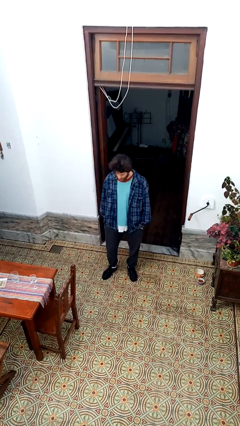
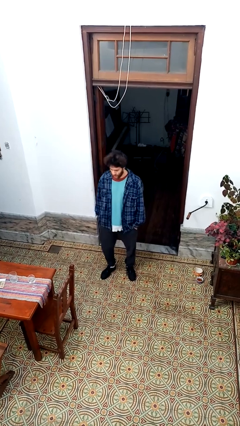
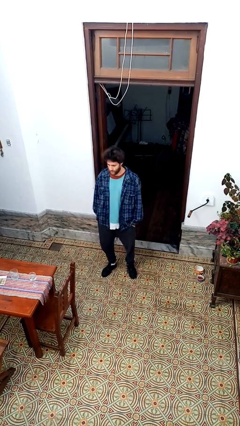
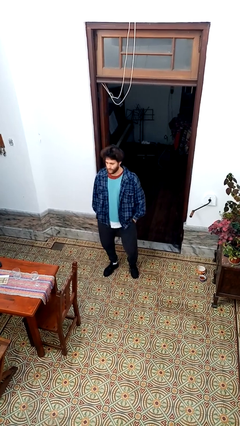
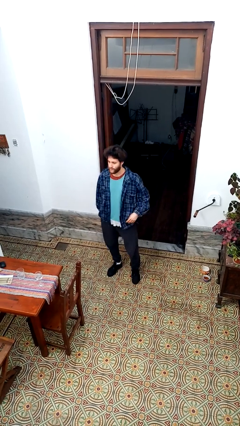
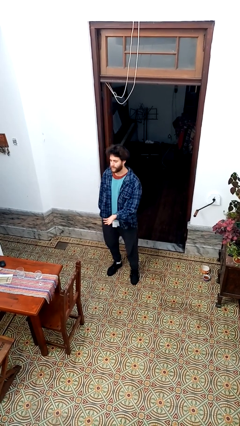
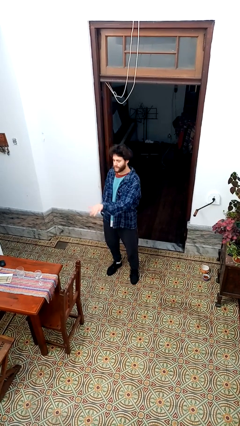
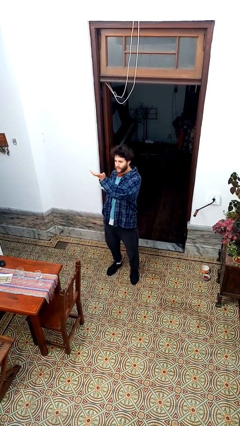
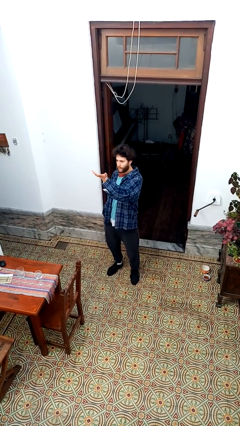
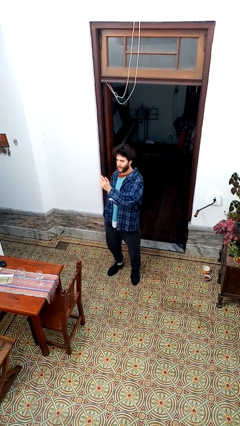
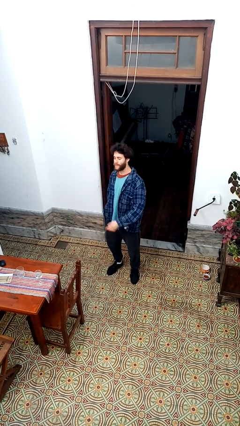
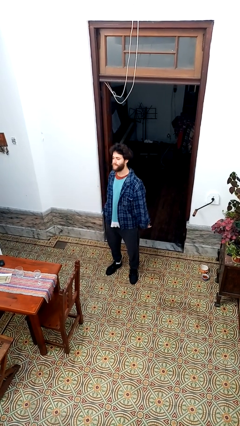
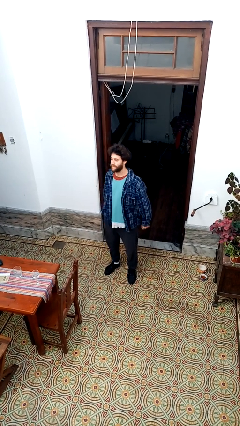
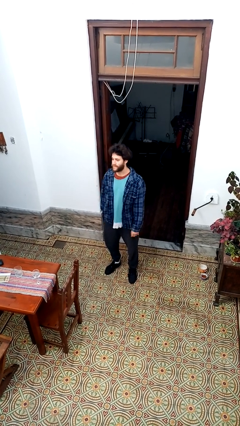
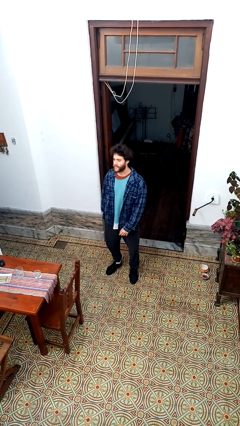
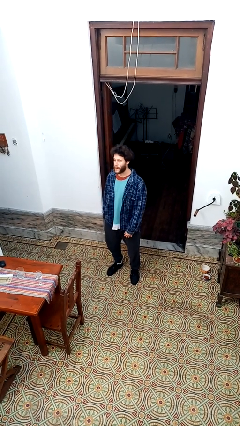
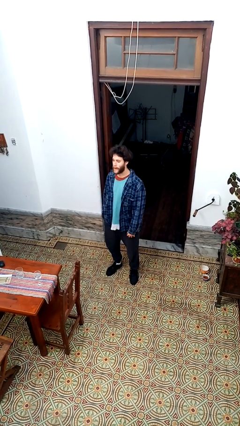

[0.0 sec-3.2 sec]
person gestures swipe up

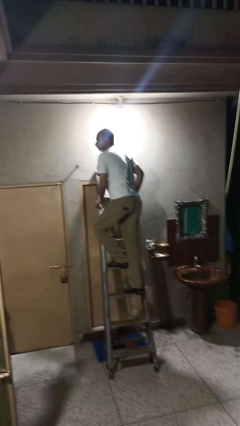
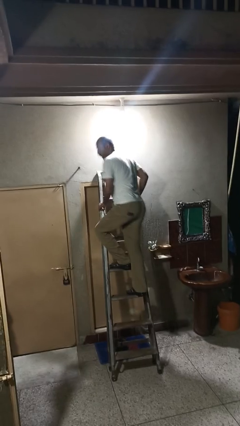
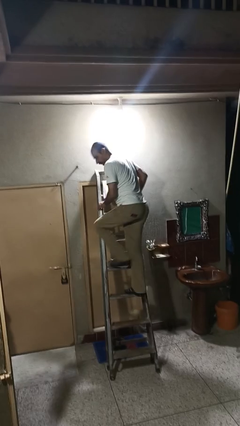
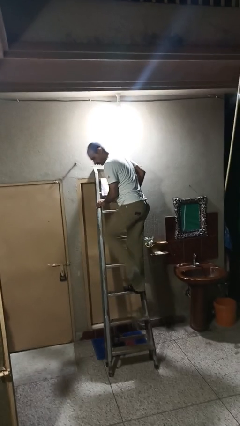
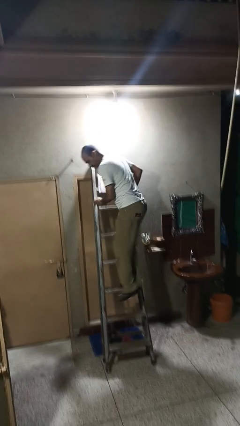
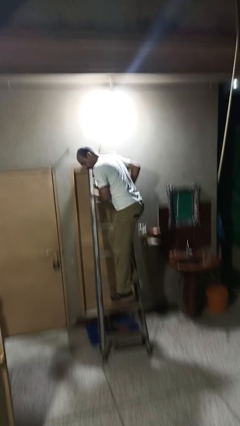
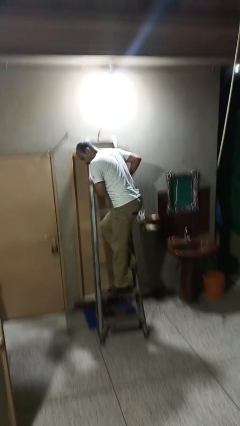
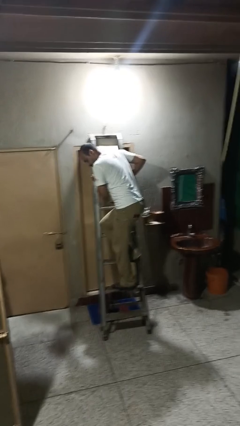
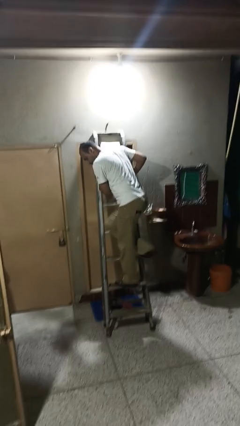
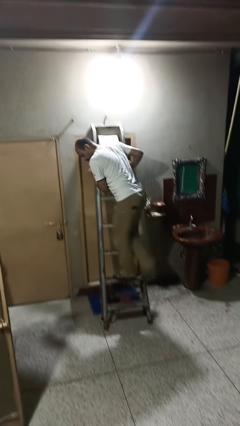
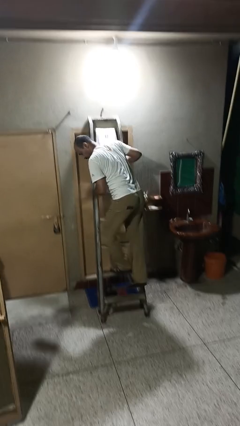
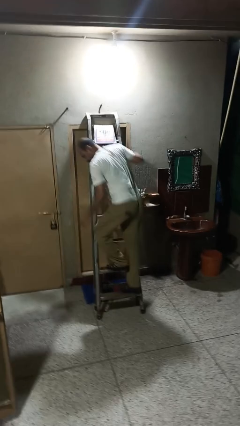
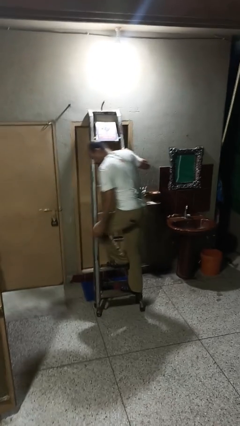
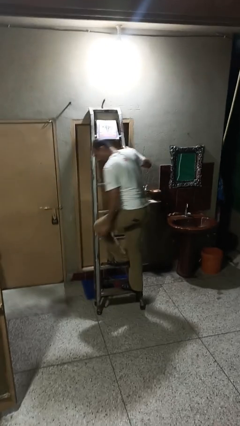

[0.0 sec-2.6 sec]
person climbs down ladder

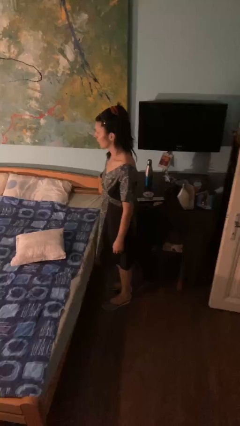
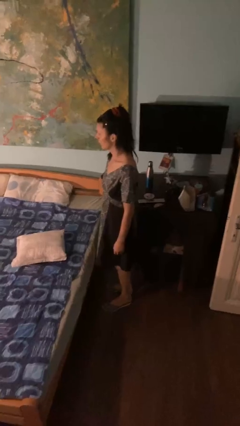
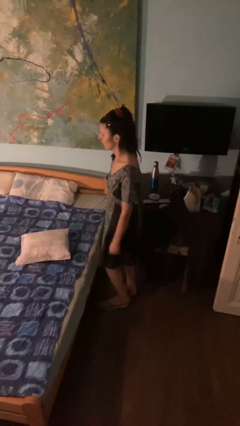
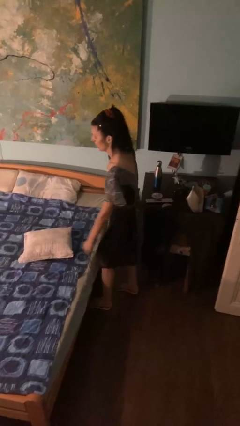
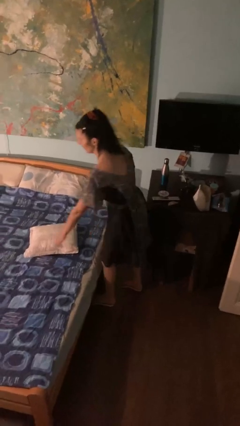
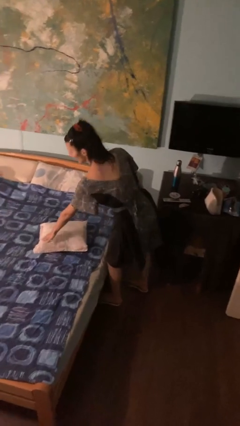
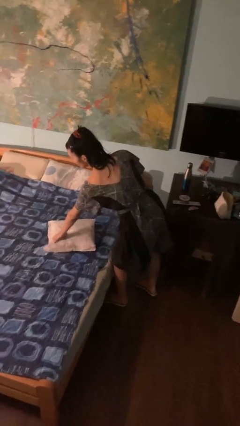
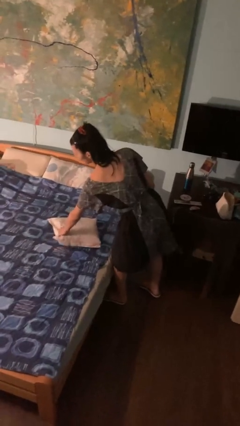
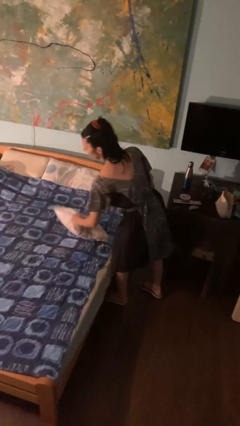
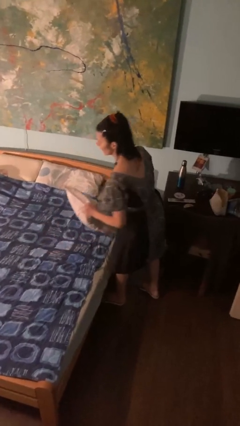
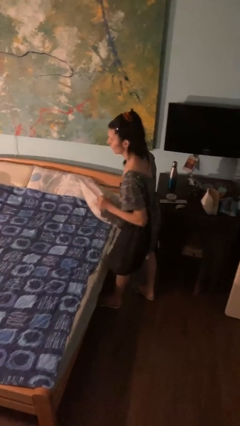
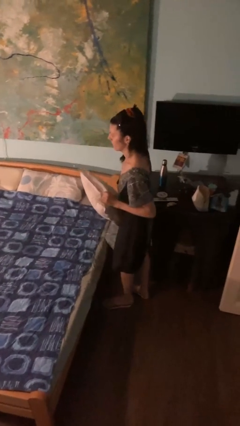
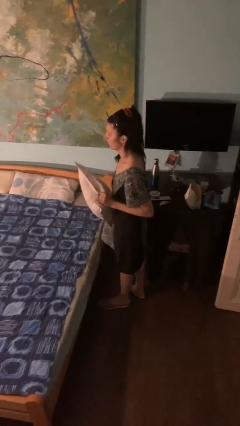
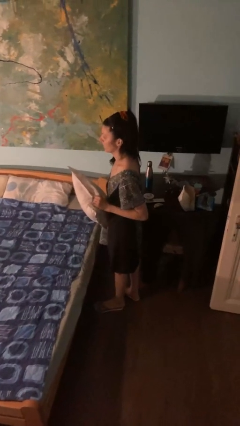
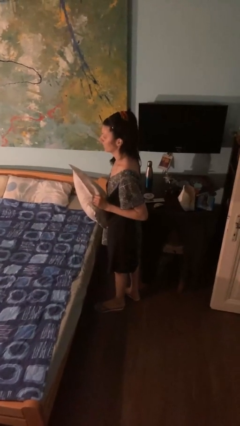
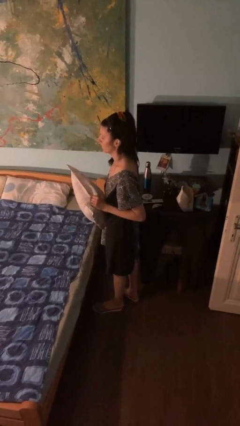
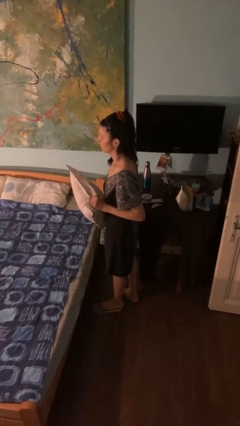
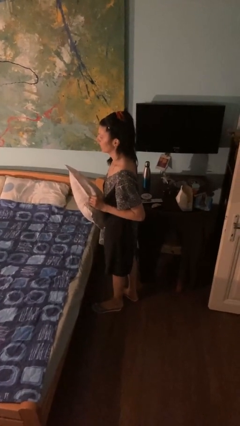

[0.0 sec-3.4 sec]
person picks up object from bed

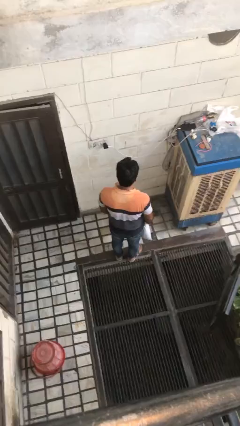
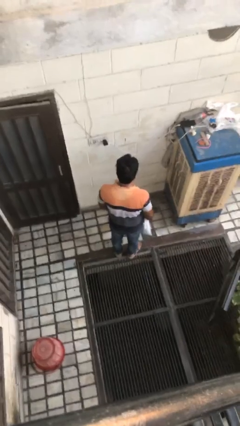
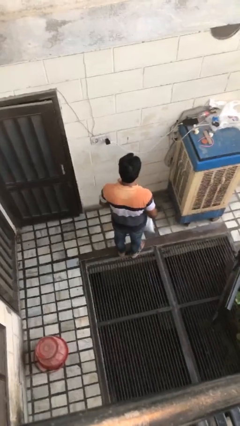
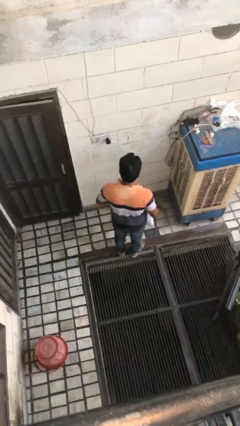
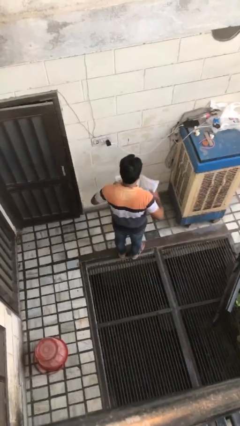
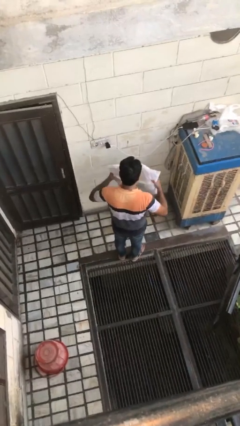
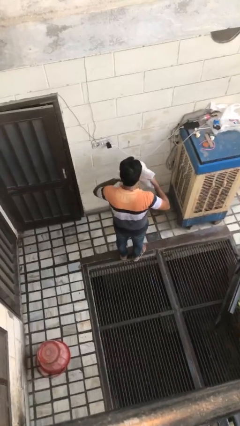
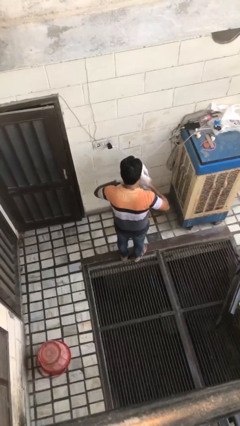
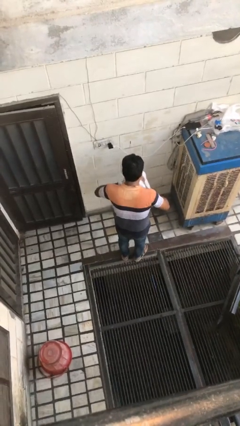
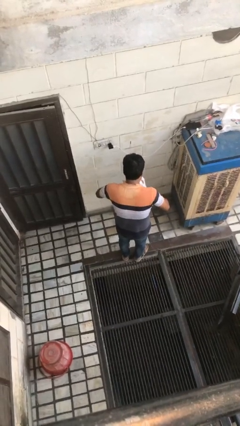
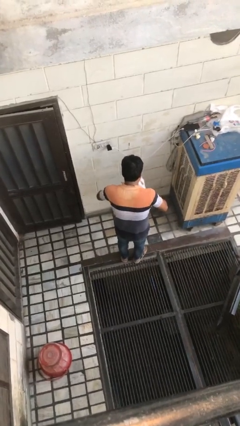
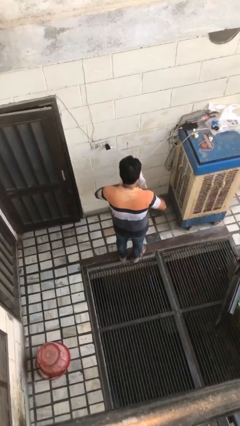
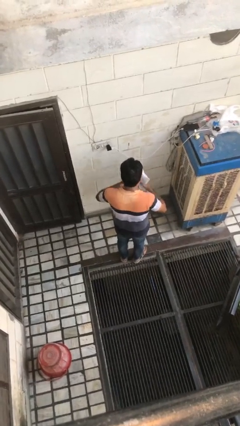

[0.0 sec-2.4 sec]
person squeezes object

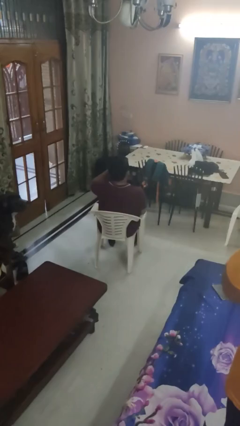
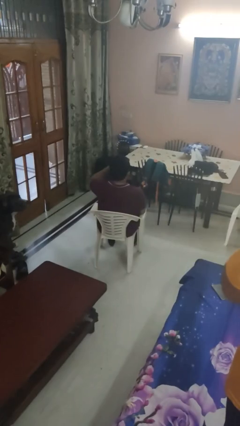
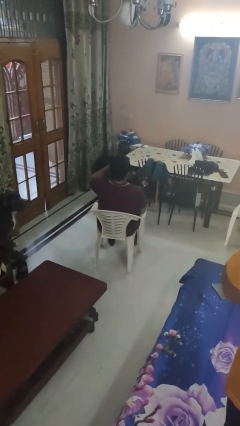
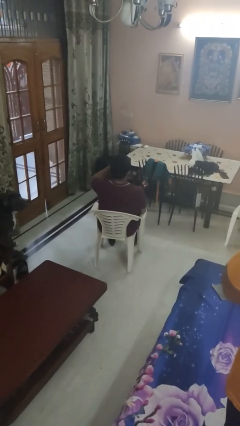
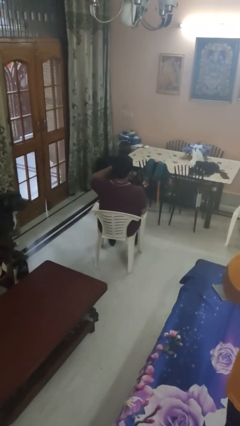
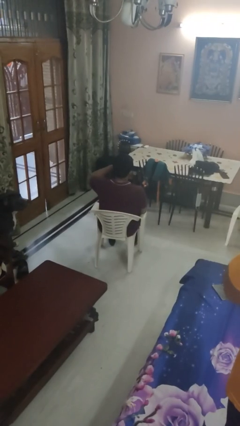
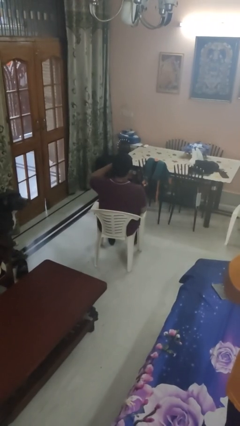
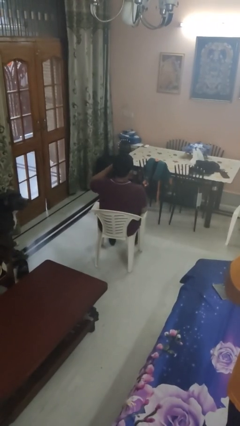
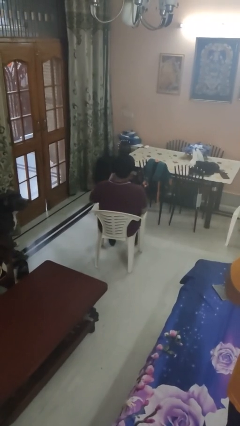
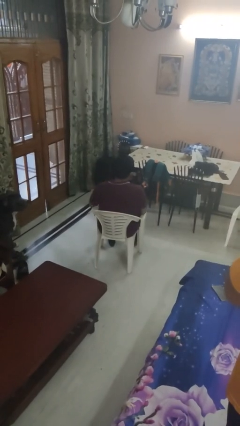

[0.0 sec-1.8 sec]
person rubs eyes

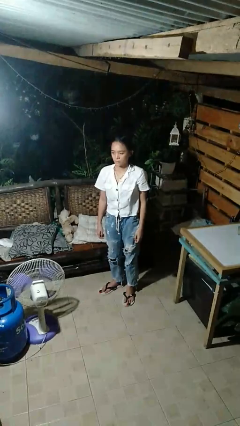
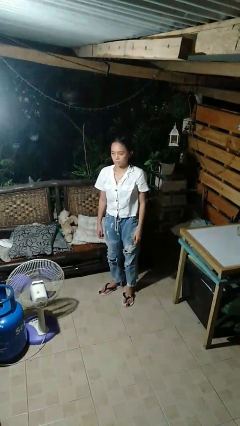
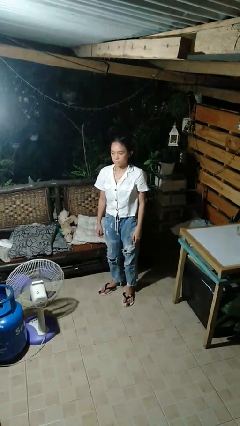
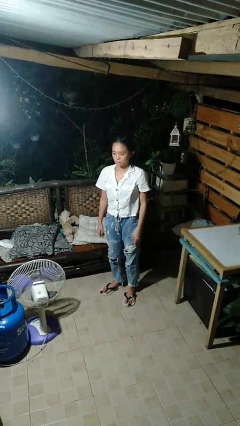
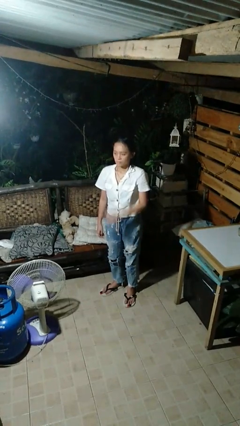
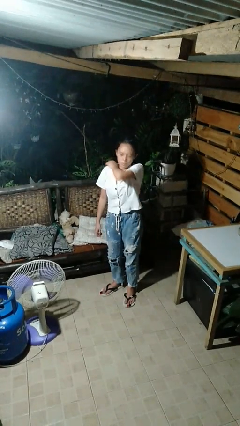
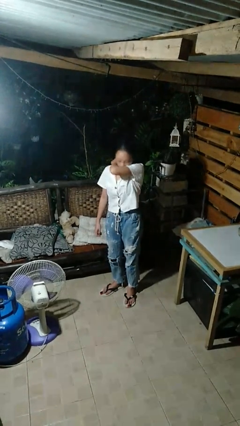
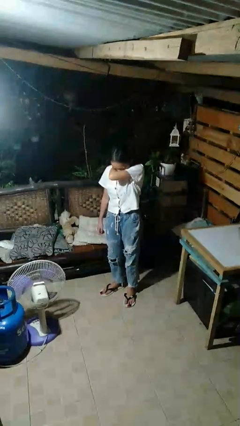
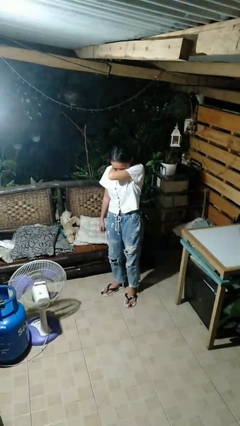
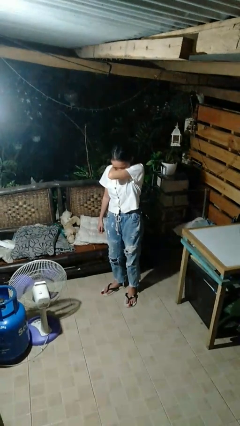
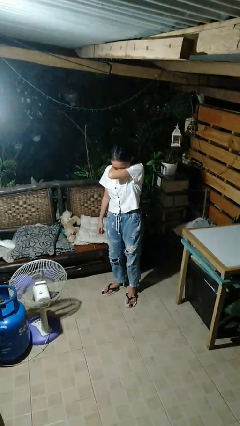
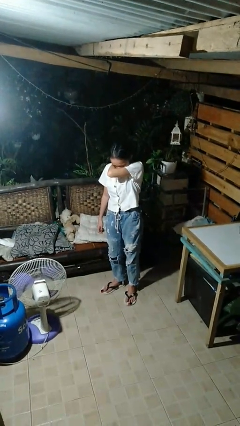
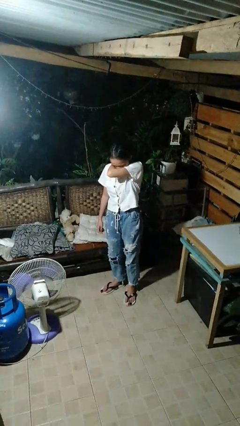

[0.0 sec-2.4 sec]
person sneezes into arm

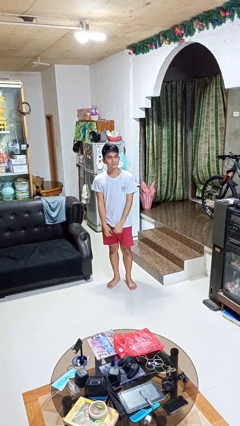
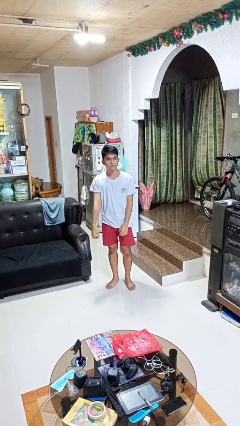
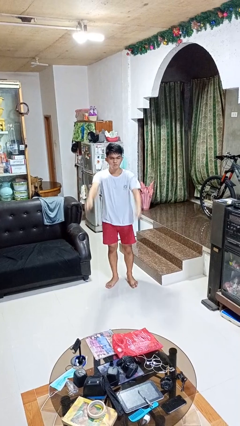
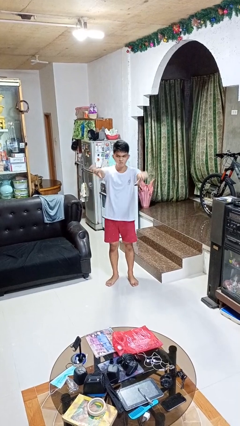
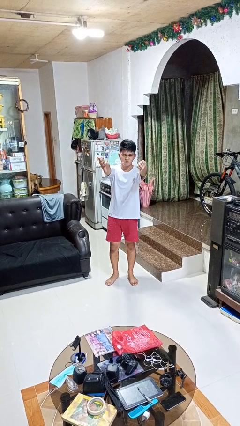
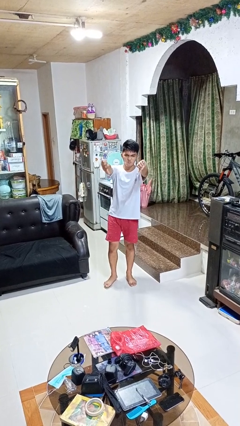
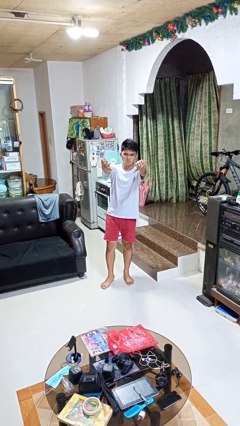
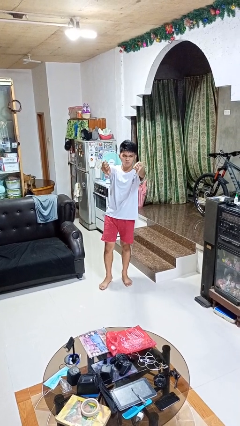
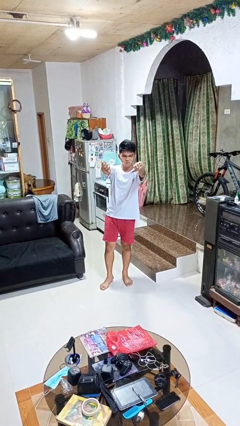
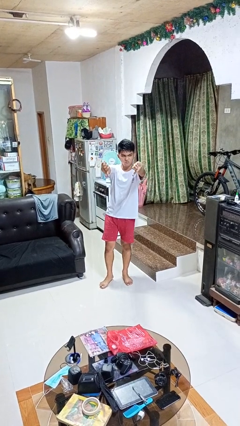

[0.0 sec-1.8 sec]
person gestures thumbs down
